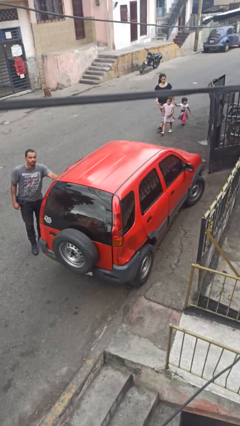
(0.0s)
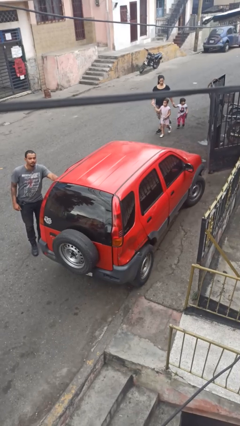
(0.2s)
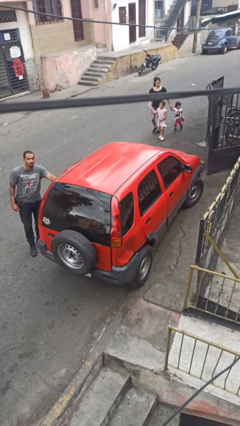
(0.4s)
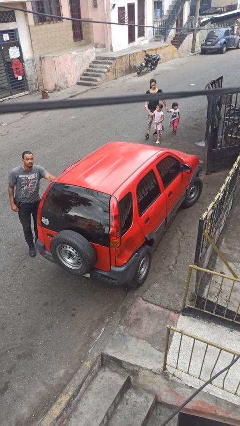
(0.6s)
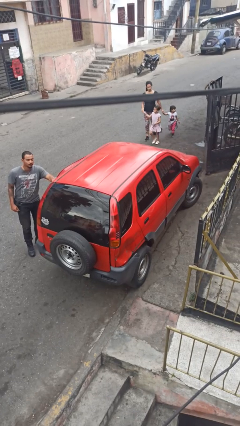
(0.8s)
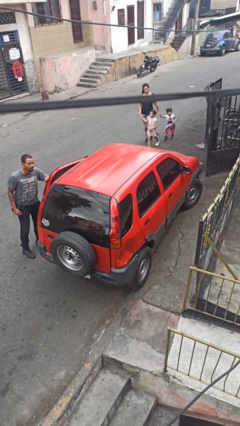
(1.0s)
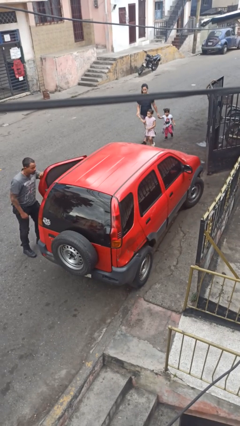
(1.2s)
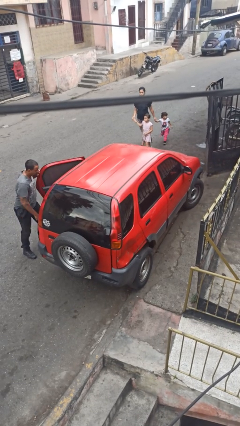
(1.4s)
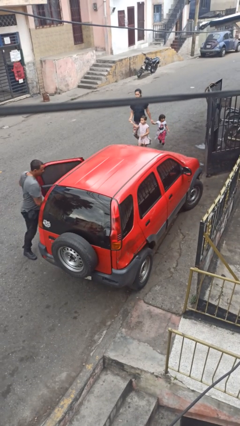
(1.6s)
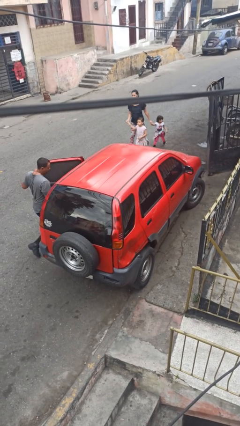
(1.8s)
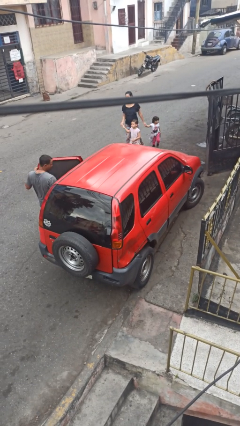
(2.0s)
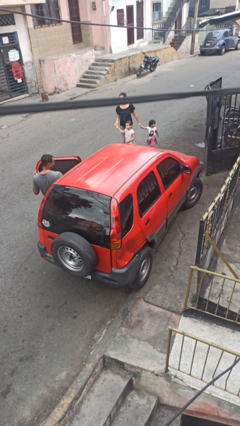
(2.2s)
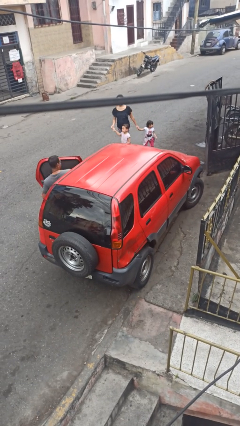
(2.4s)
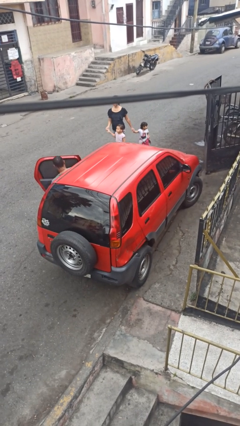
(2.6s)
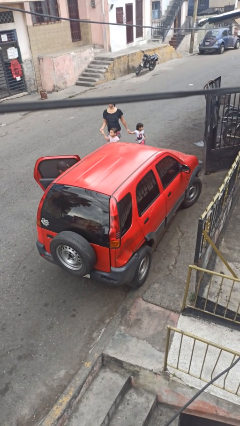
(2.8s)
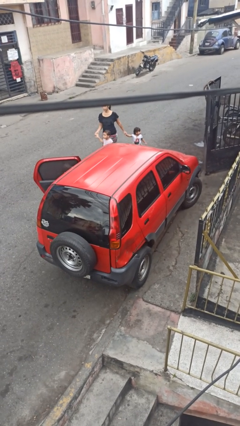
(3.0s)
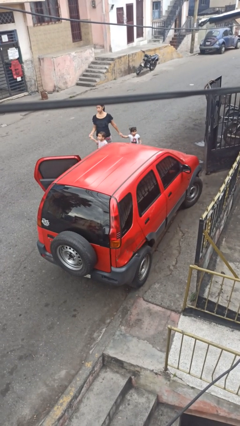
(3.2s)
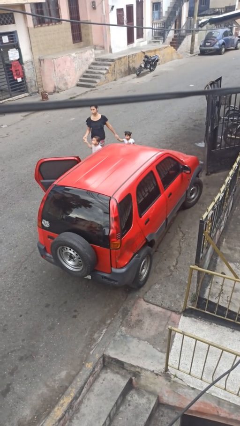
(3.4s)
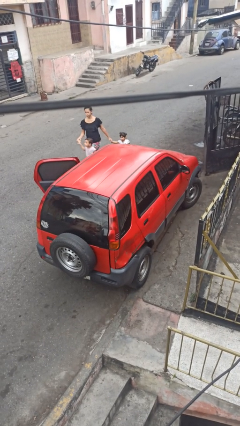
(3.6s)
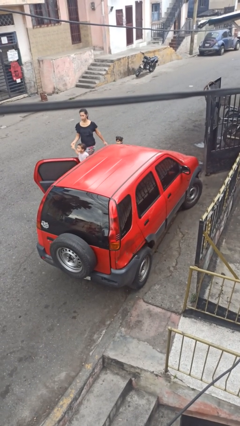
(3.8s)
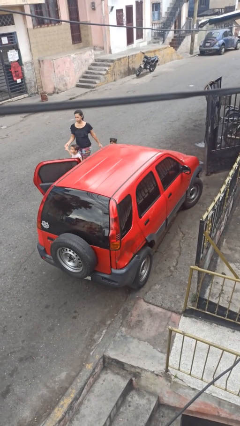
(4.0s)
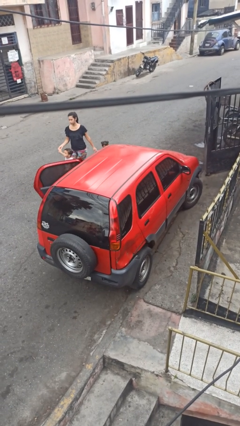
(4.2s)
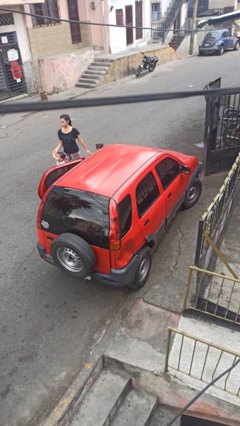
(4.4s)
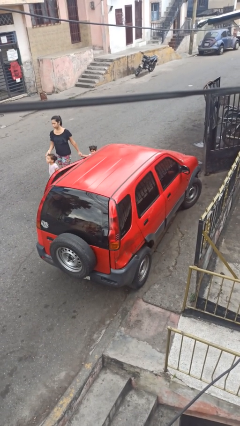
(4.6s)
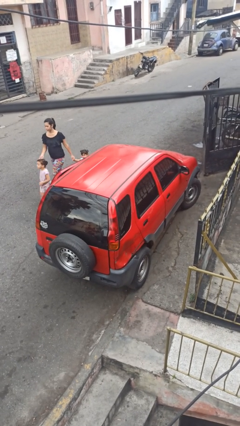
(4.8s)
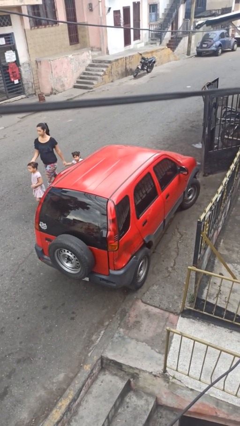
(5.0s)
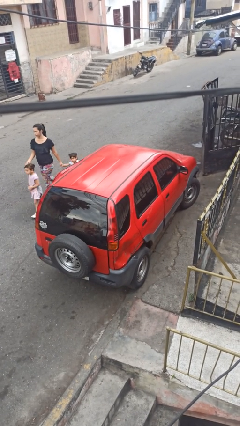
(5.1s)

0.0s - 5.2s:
car picks up person

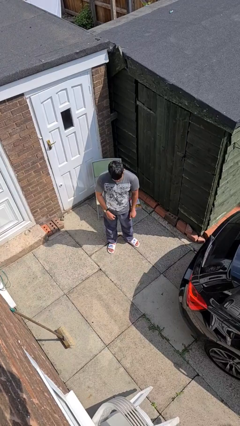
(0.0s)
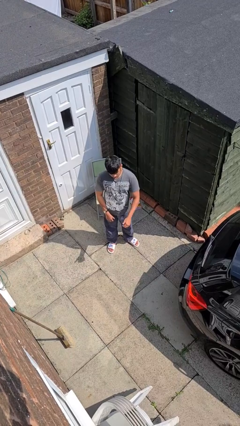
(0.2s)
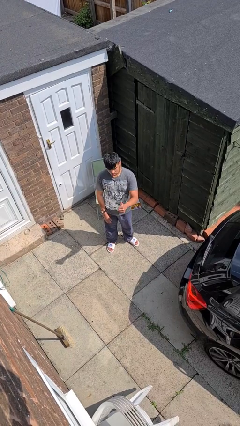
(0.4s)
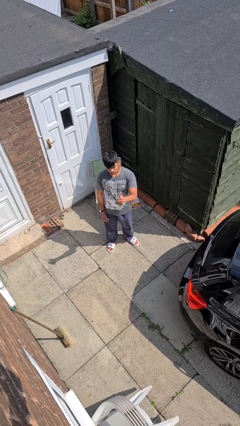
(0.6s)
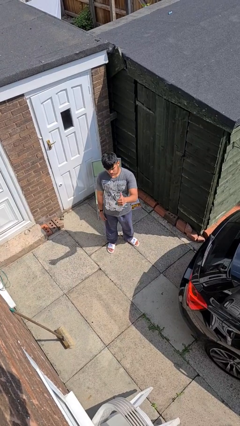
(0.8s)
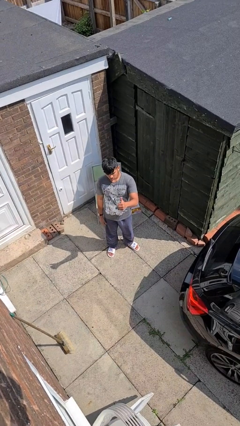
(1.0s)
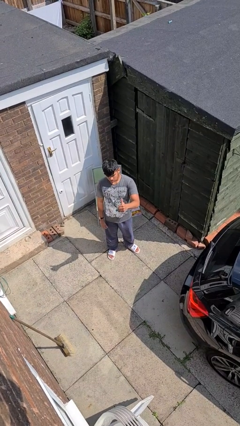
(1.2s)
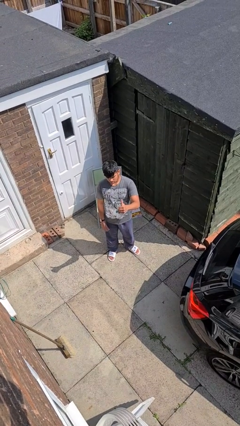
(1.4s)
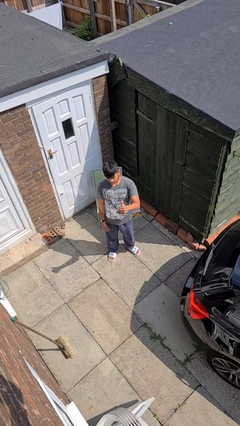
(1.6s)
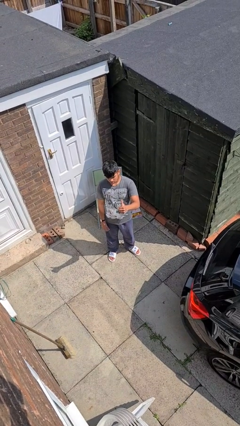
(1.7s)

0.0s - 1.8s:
person gestures thumbs up

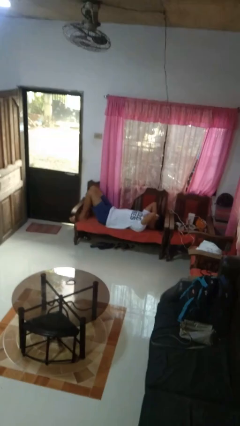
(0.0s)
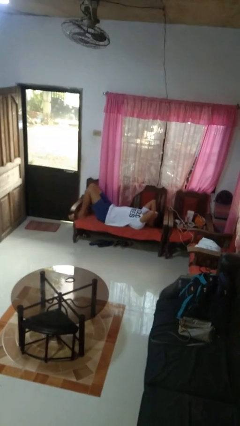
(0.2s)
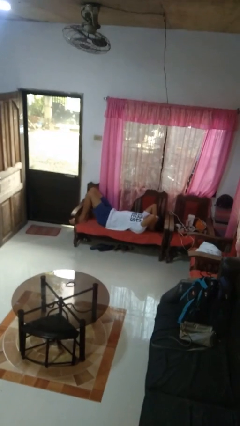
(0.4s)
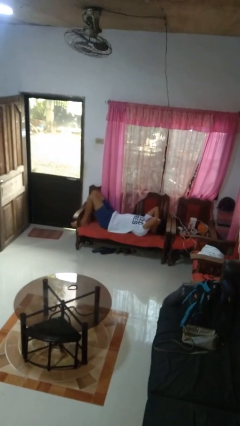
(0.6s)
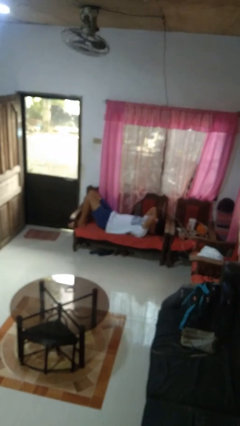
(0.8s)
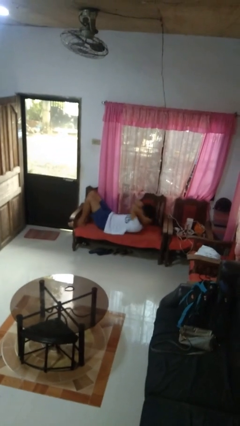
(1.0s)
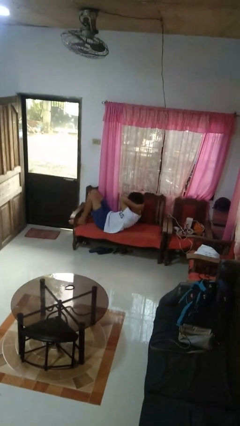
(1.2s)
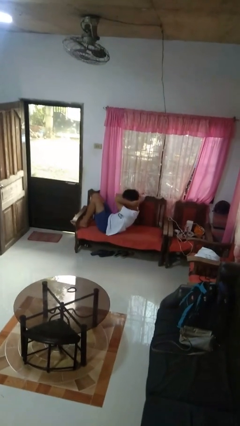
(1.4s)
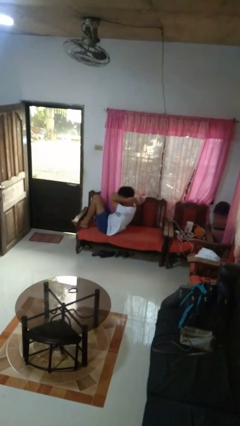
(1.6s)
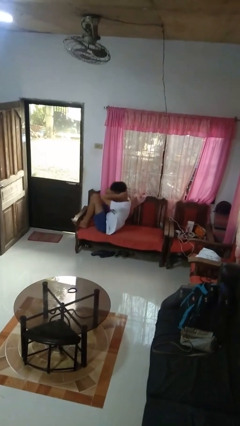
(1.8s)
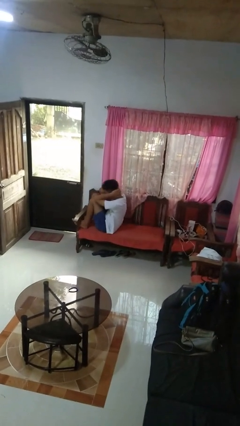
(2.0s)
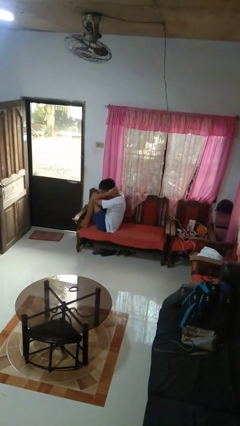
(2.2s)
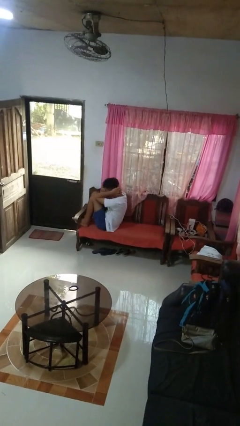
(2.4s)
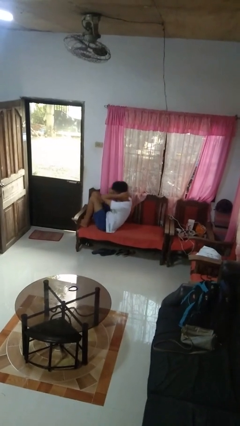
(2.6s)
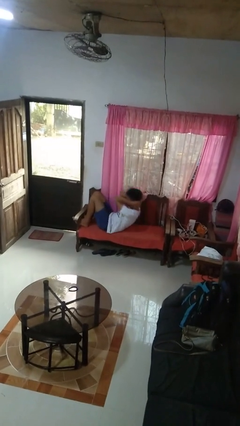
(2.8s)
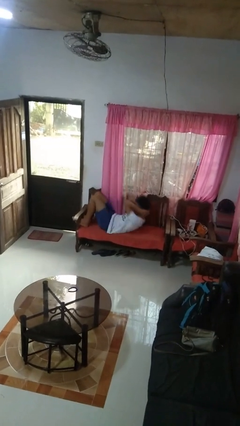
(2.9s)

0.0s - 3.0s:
person exercises with situp

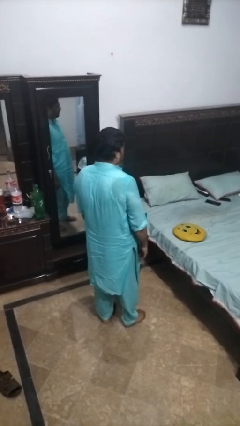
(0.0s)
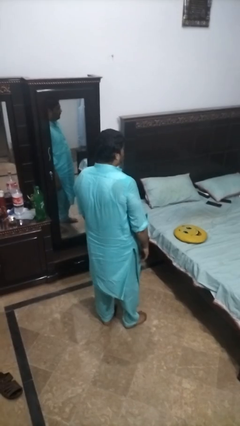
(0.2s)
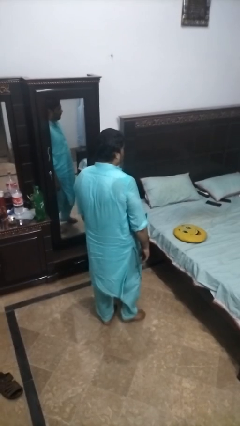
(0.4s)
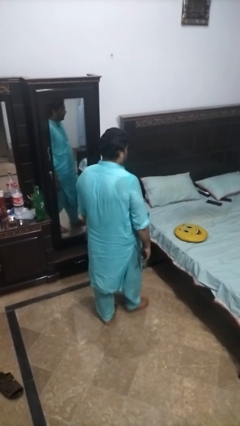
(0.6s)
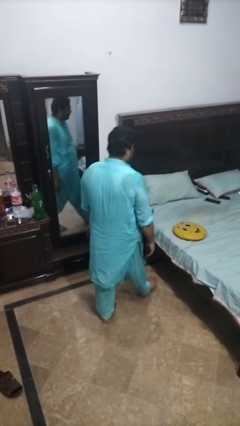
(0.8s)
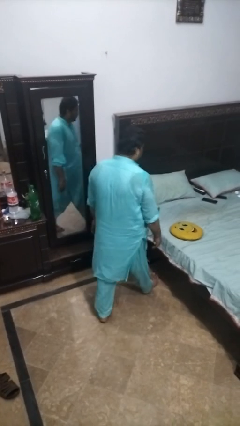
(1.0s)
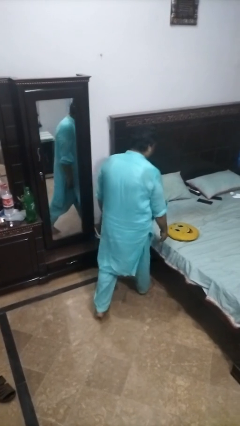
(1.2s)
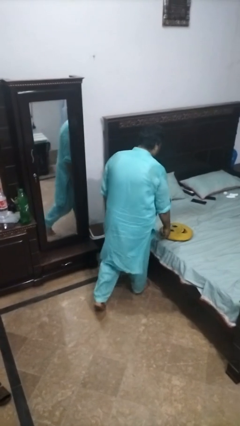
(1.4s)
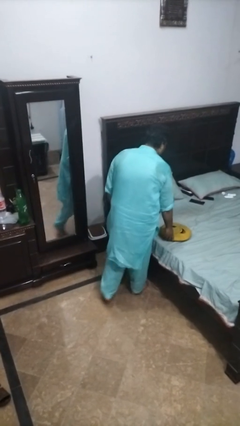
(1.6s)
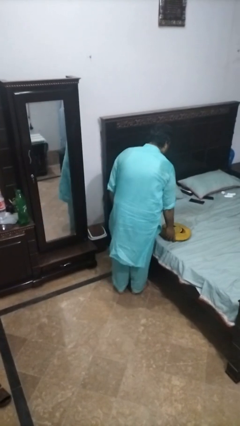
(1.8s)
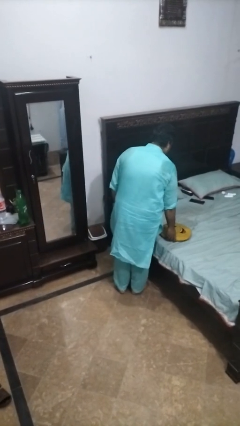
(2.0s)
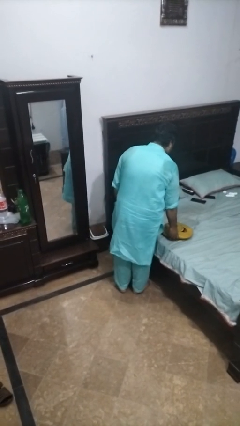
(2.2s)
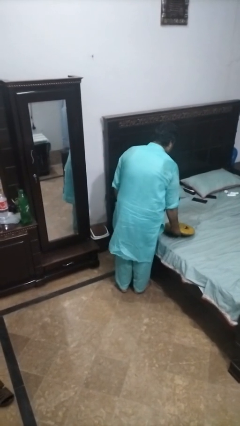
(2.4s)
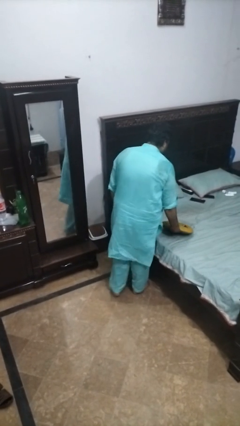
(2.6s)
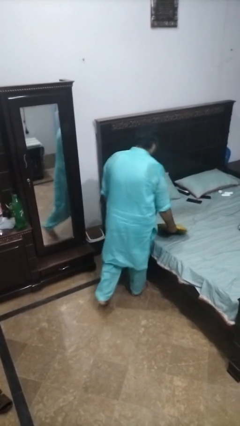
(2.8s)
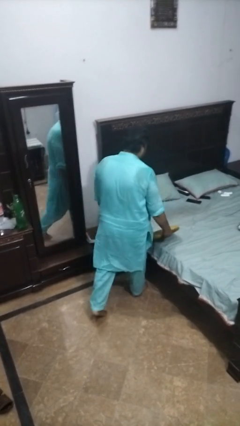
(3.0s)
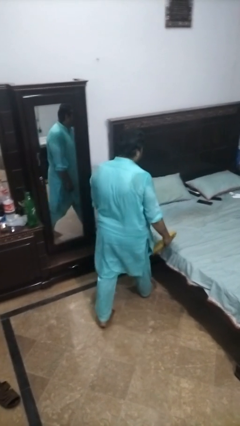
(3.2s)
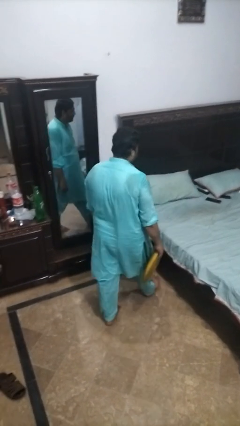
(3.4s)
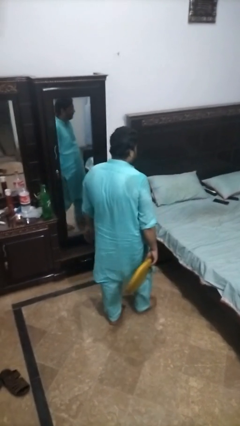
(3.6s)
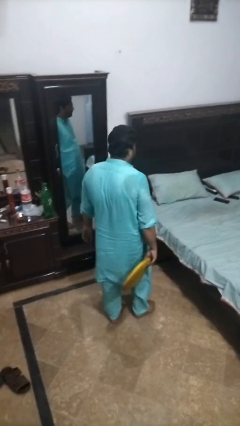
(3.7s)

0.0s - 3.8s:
person picks up object from bed

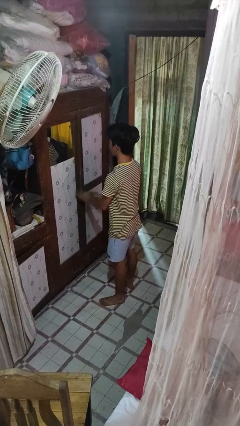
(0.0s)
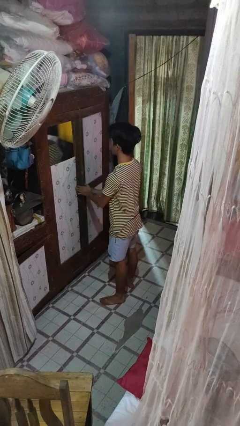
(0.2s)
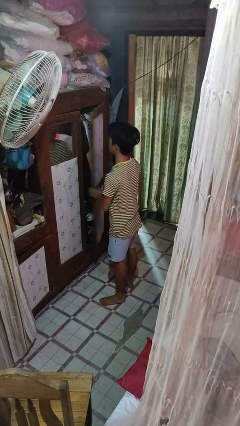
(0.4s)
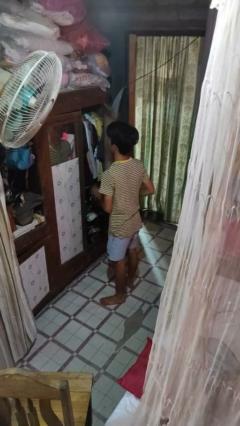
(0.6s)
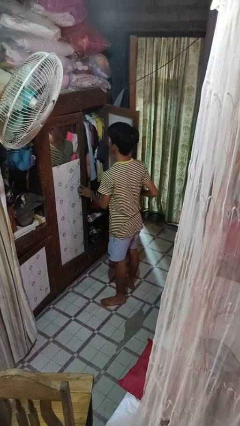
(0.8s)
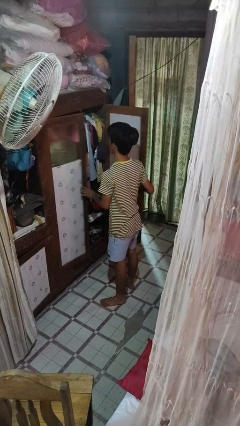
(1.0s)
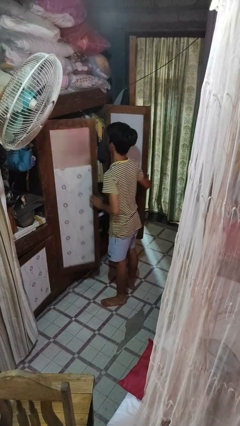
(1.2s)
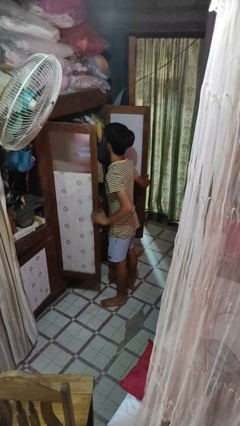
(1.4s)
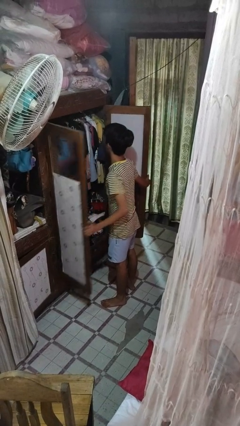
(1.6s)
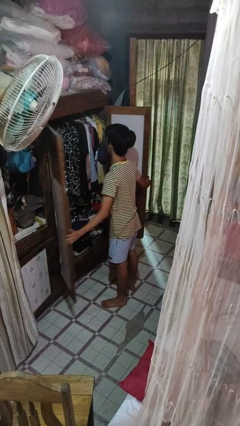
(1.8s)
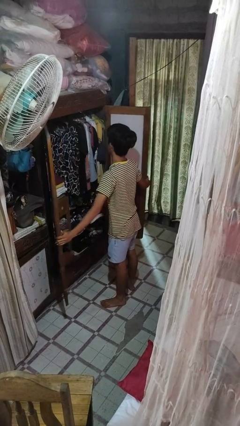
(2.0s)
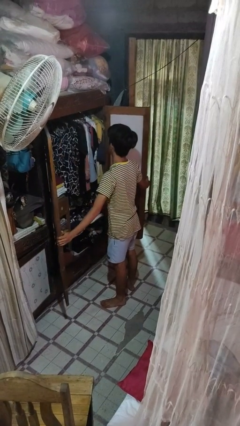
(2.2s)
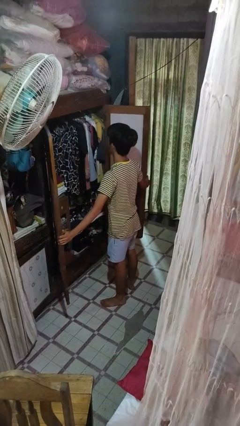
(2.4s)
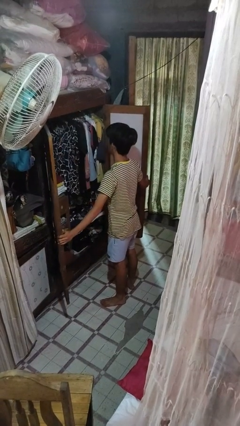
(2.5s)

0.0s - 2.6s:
person opens closet door

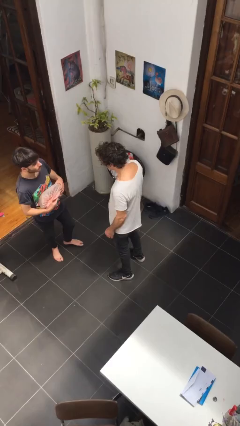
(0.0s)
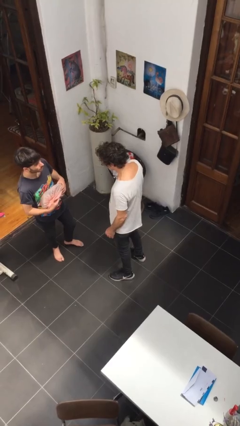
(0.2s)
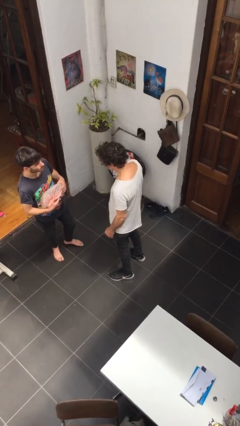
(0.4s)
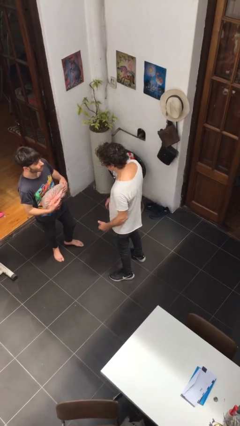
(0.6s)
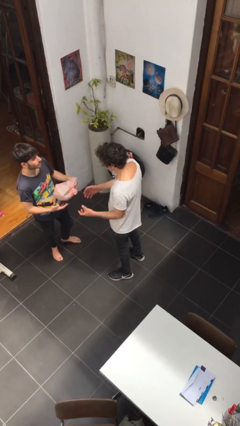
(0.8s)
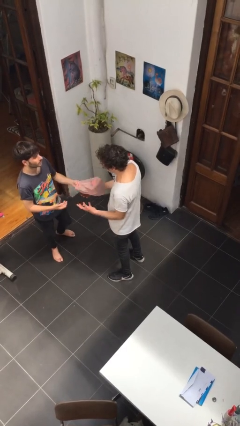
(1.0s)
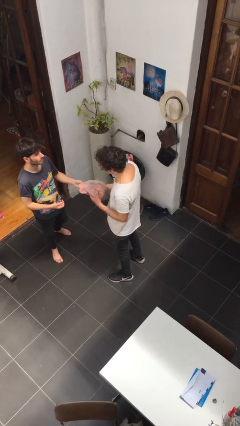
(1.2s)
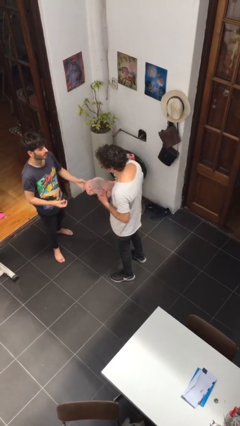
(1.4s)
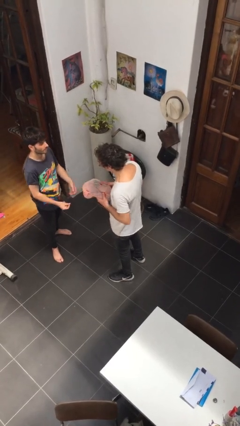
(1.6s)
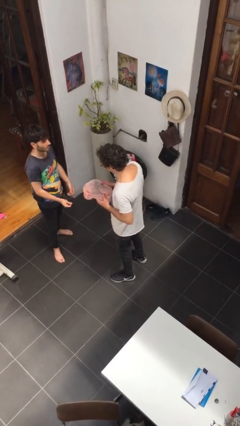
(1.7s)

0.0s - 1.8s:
person transfers object to person
